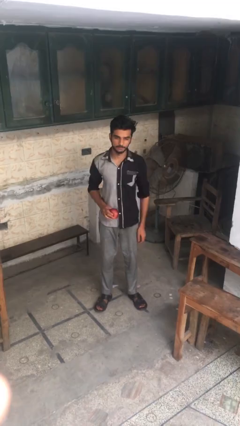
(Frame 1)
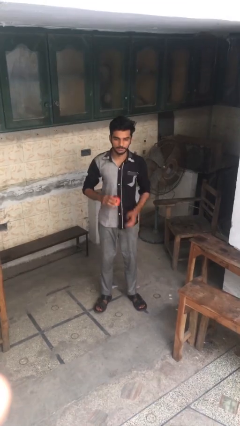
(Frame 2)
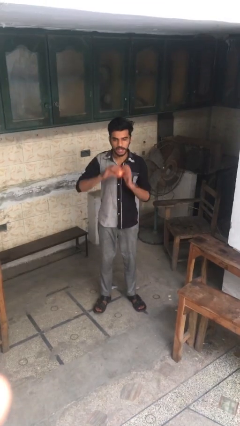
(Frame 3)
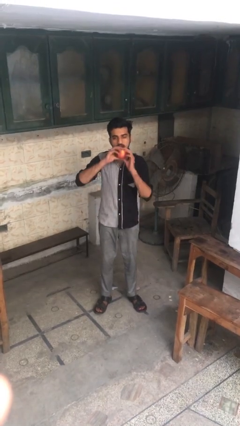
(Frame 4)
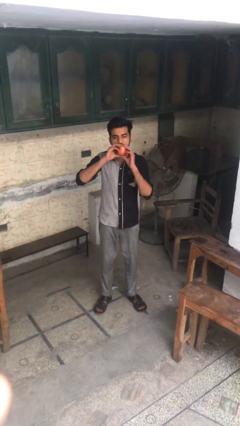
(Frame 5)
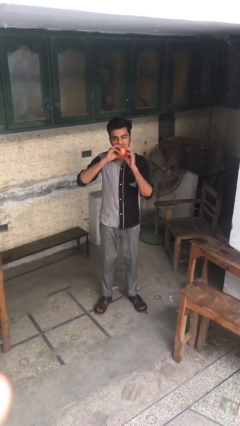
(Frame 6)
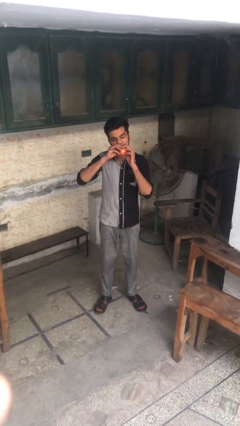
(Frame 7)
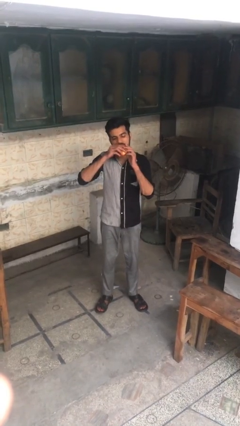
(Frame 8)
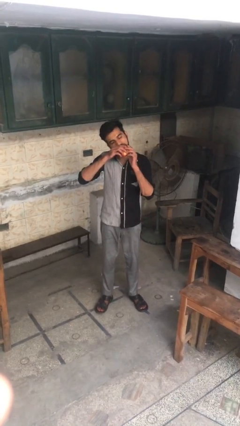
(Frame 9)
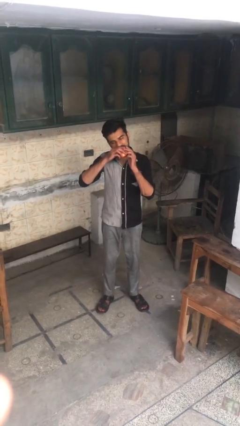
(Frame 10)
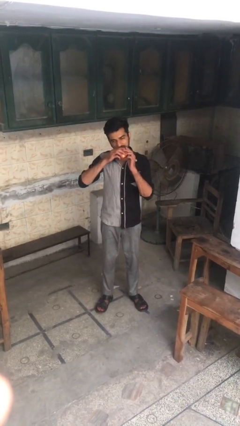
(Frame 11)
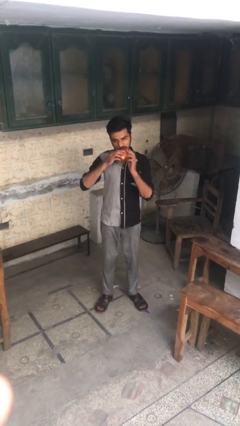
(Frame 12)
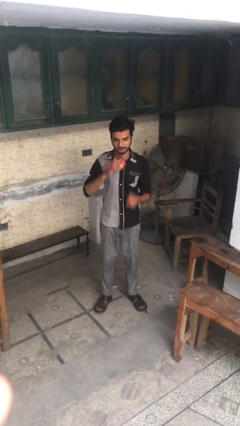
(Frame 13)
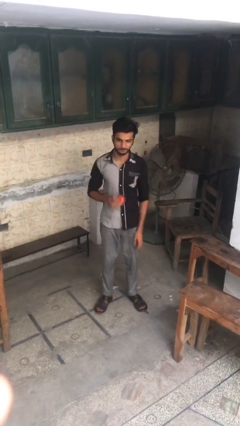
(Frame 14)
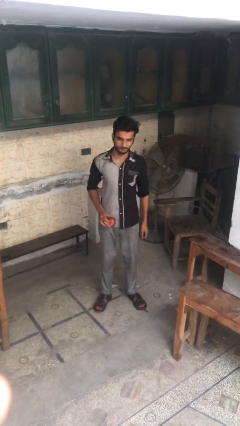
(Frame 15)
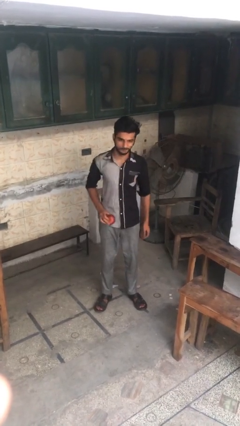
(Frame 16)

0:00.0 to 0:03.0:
person eats apple

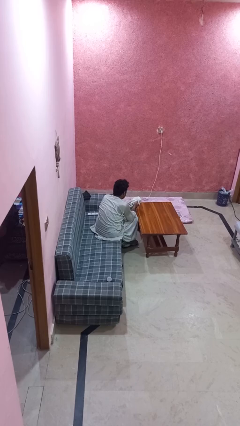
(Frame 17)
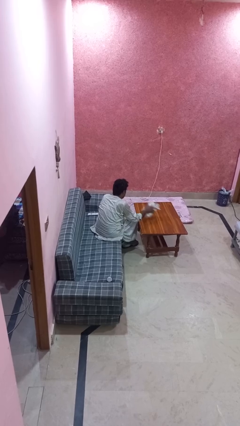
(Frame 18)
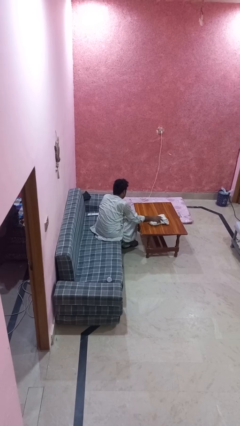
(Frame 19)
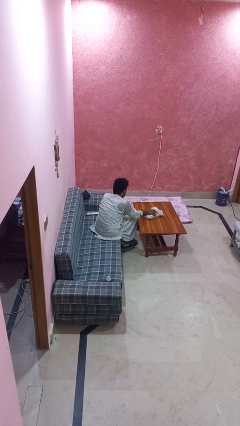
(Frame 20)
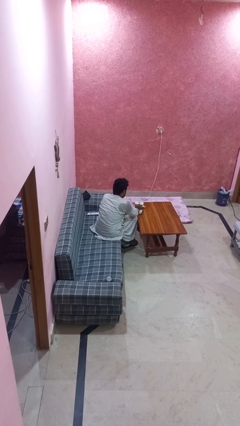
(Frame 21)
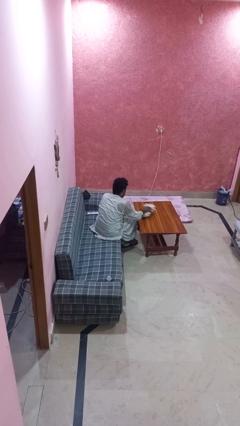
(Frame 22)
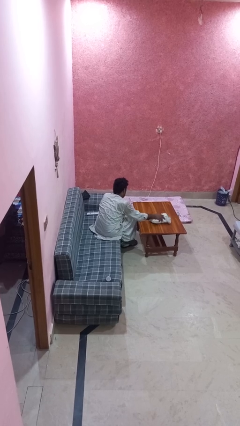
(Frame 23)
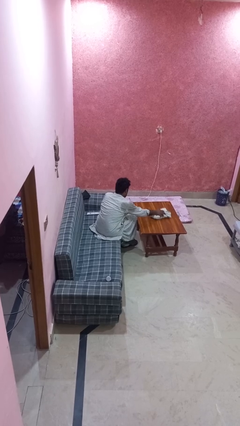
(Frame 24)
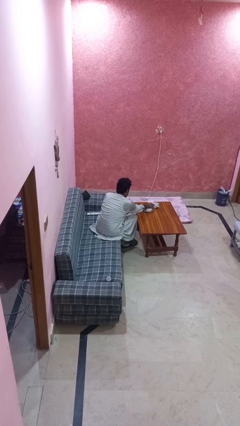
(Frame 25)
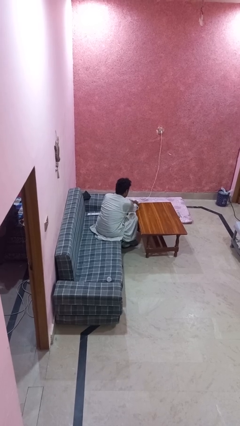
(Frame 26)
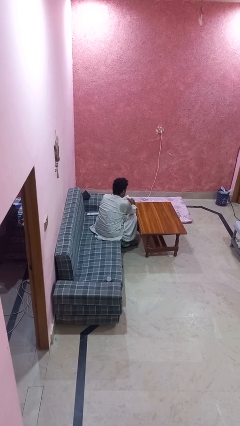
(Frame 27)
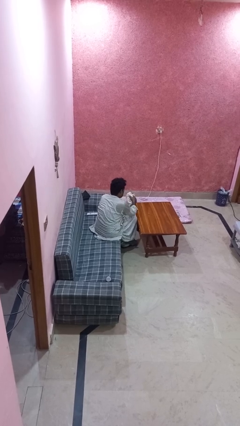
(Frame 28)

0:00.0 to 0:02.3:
person cleans table with rag

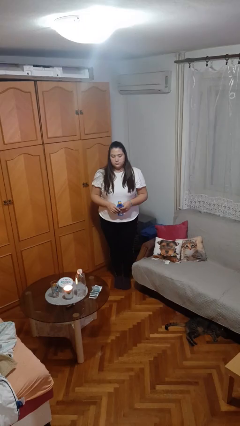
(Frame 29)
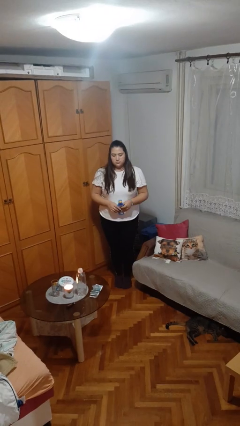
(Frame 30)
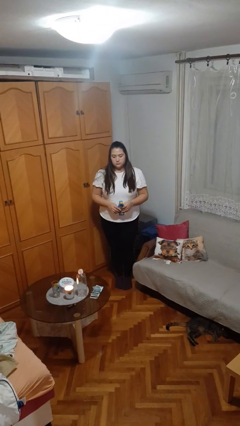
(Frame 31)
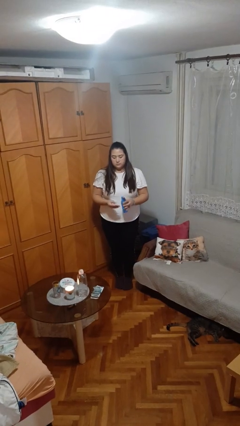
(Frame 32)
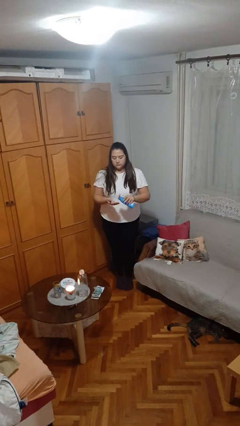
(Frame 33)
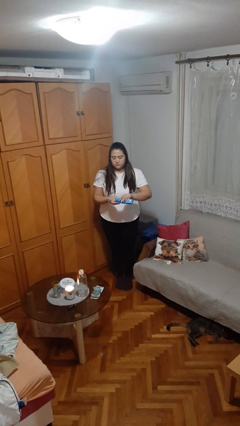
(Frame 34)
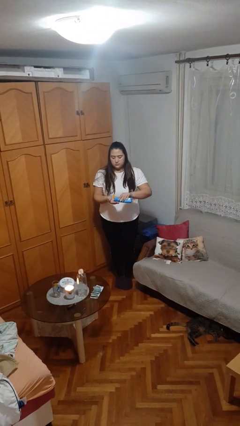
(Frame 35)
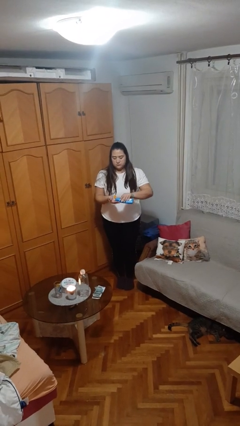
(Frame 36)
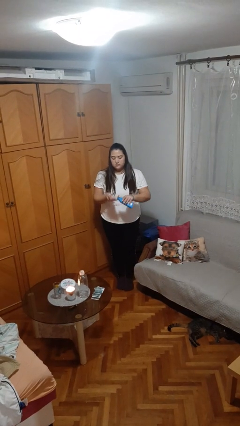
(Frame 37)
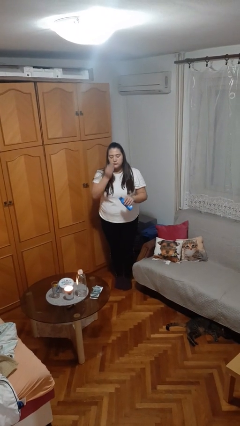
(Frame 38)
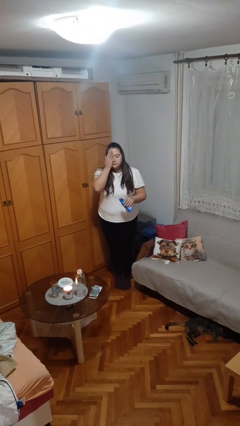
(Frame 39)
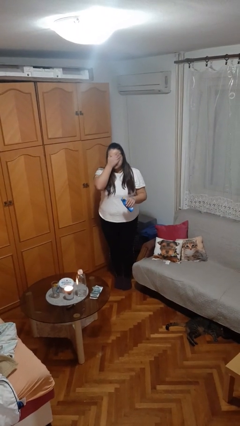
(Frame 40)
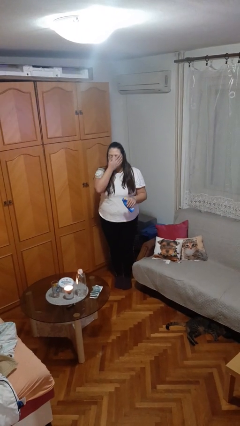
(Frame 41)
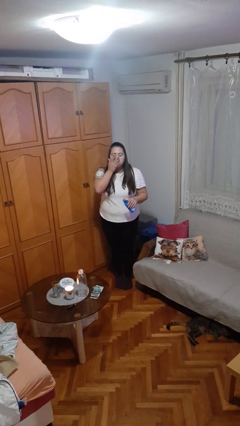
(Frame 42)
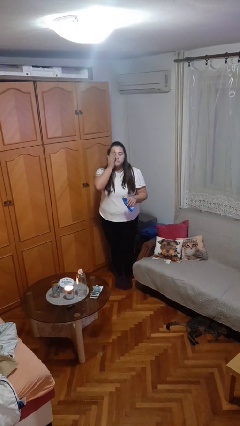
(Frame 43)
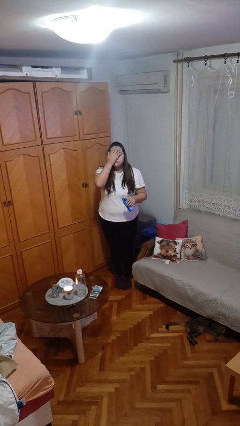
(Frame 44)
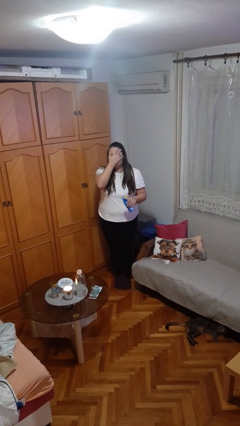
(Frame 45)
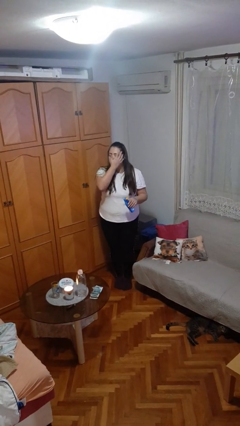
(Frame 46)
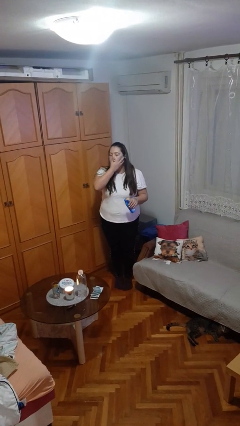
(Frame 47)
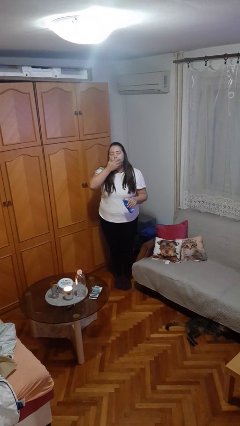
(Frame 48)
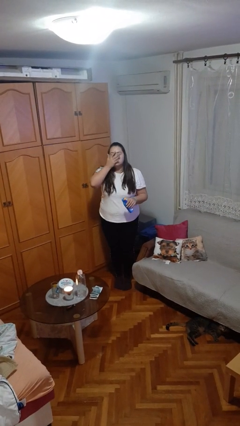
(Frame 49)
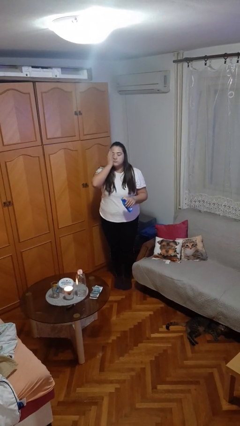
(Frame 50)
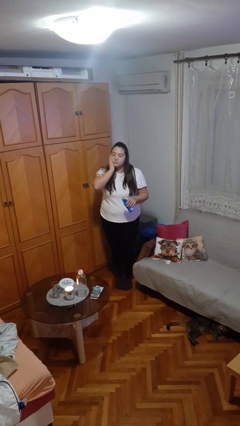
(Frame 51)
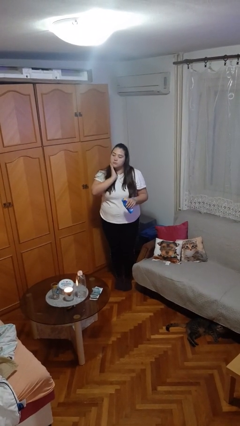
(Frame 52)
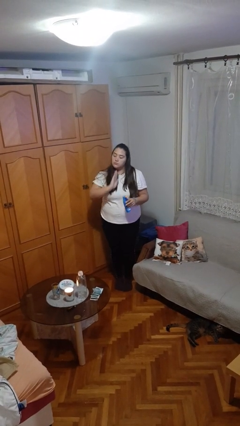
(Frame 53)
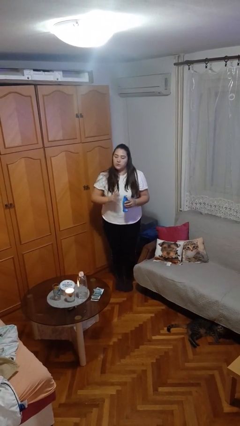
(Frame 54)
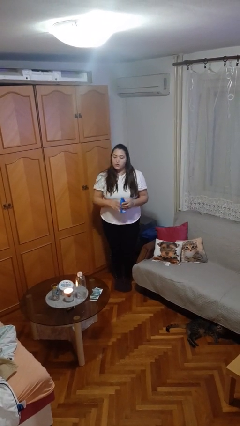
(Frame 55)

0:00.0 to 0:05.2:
person applies sunscreen

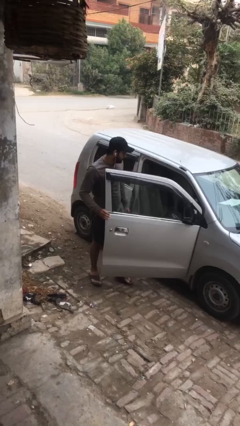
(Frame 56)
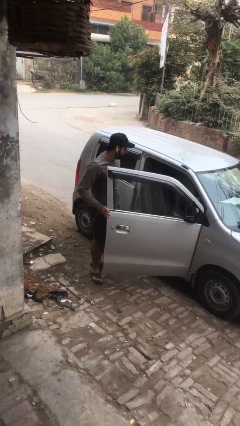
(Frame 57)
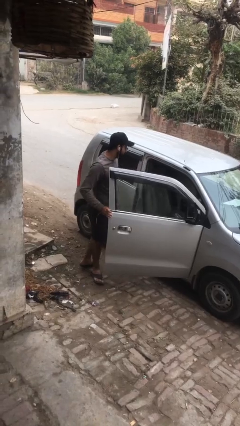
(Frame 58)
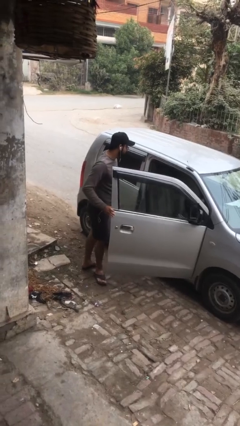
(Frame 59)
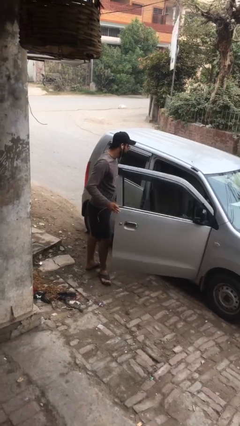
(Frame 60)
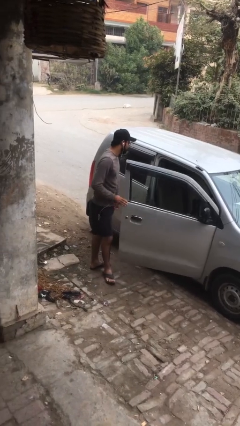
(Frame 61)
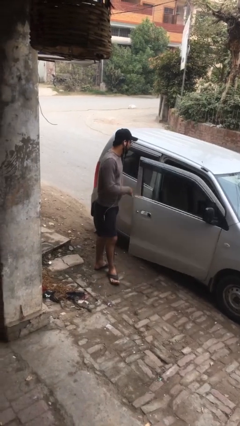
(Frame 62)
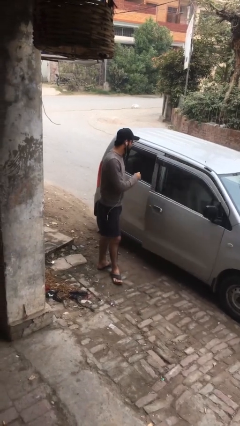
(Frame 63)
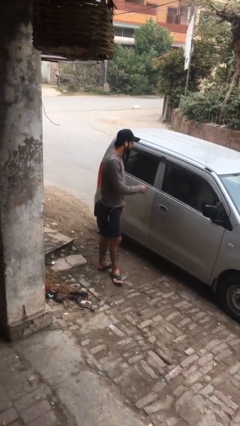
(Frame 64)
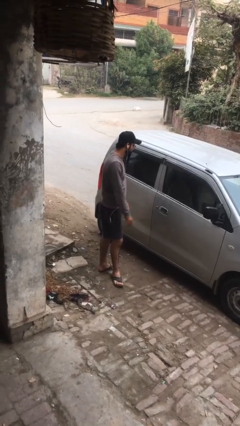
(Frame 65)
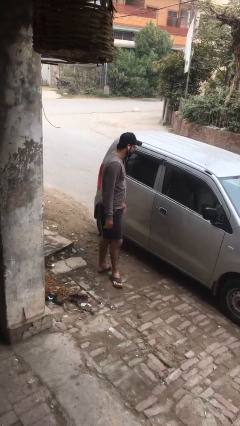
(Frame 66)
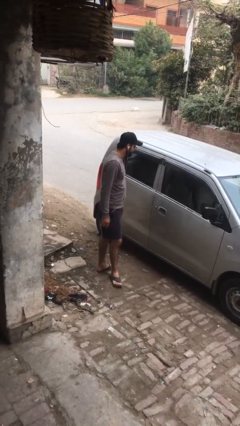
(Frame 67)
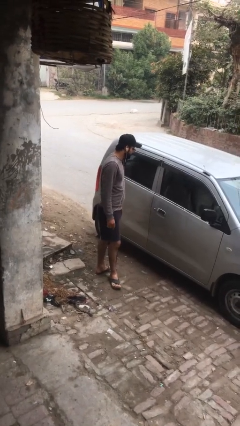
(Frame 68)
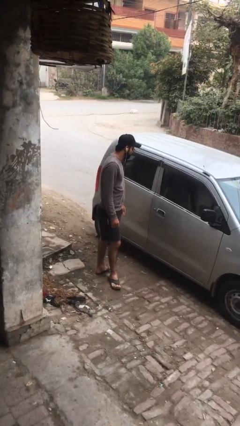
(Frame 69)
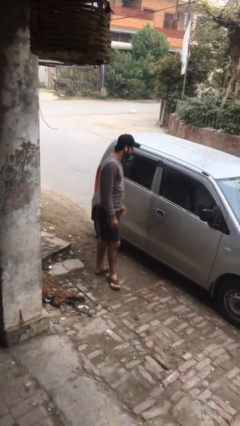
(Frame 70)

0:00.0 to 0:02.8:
person closes car door

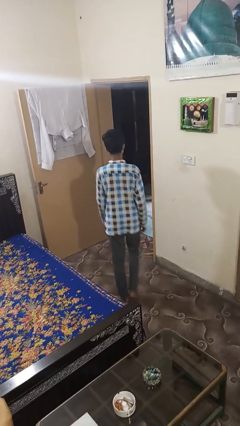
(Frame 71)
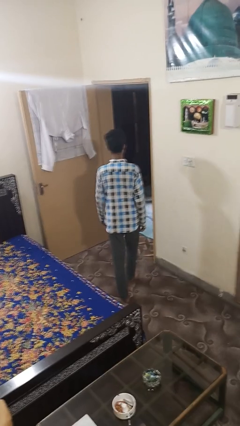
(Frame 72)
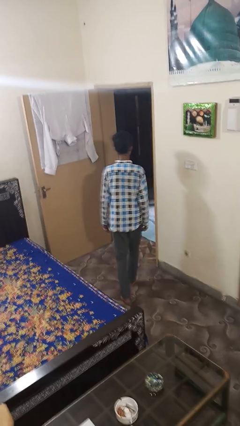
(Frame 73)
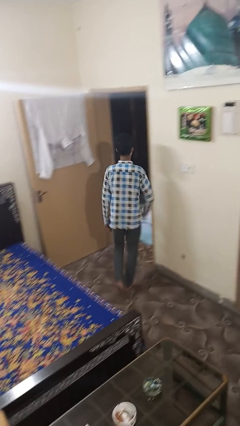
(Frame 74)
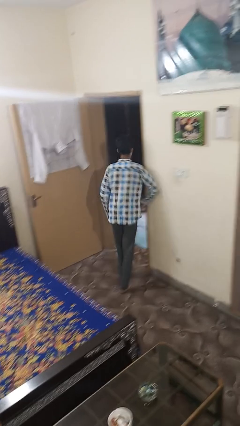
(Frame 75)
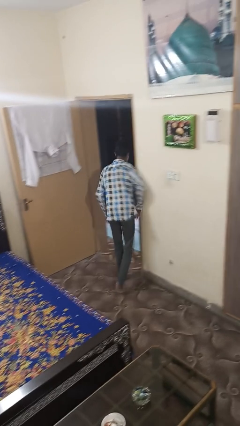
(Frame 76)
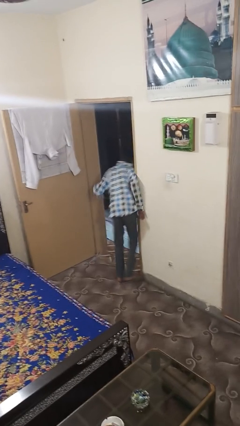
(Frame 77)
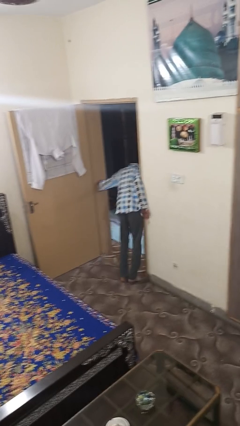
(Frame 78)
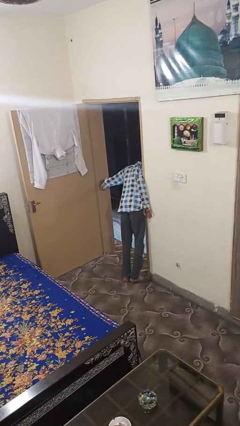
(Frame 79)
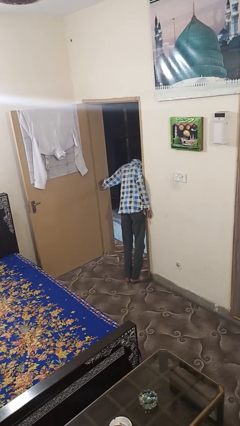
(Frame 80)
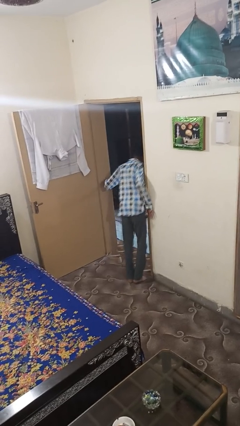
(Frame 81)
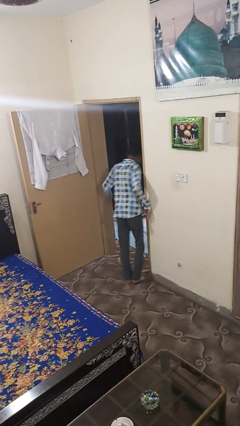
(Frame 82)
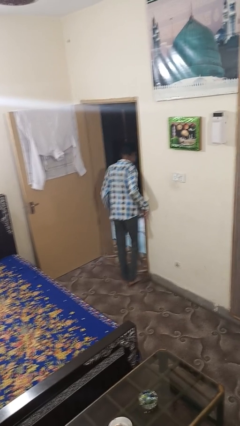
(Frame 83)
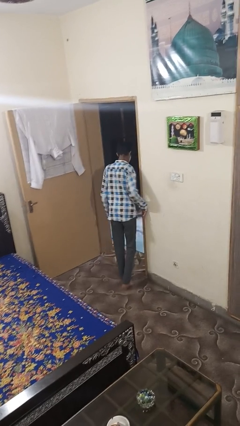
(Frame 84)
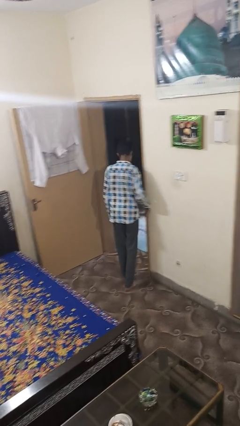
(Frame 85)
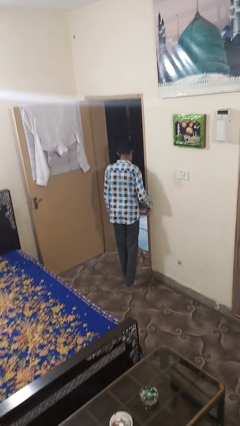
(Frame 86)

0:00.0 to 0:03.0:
person bumps into wall

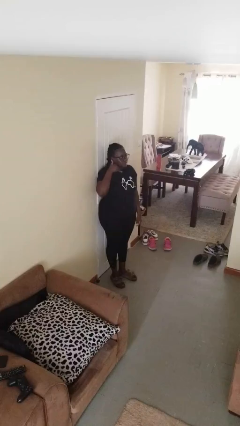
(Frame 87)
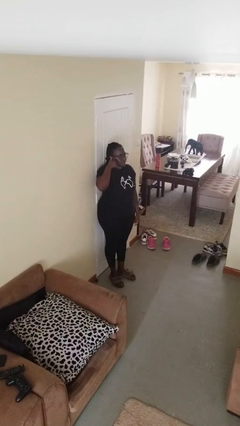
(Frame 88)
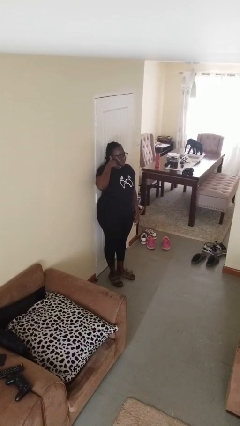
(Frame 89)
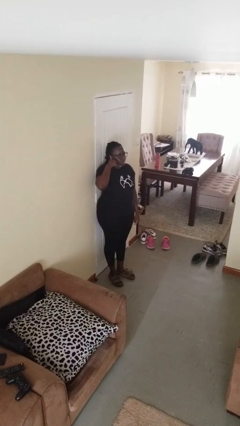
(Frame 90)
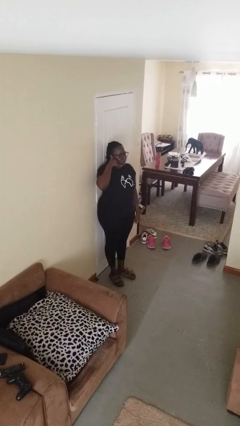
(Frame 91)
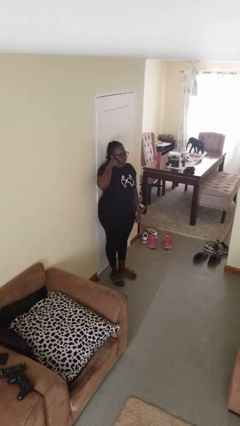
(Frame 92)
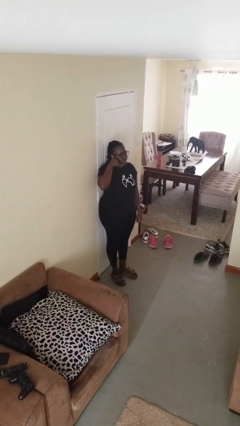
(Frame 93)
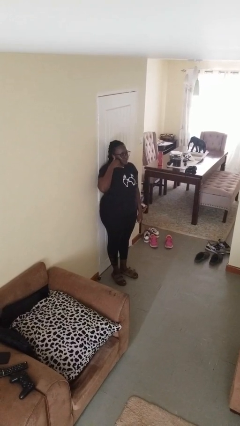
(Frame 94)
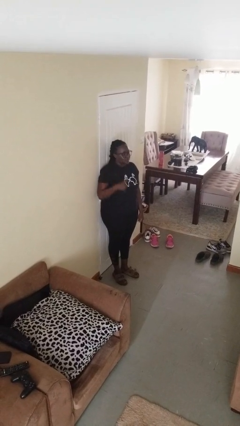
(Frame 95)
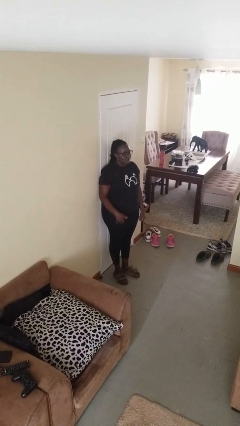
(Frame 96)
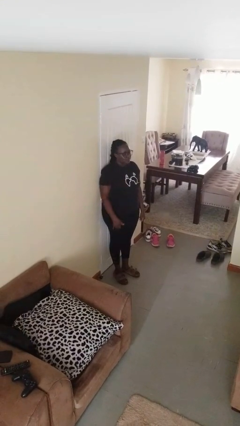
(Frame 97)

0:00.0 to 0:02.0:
person gestures call me
